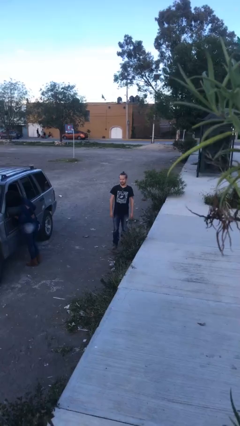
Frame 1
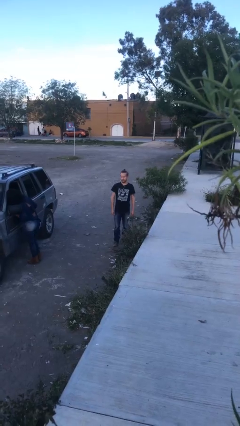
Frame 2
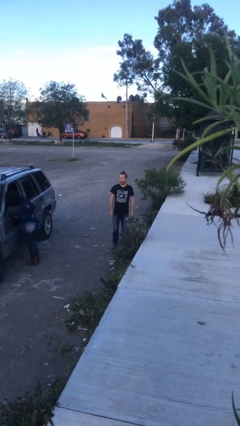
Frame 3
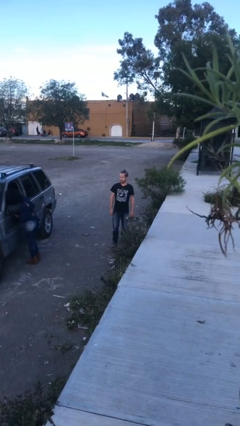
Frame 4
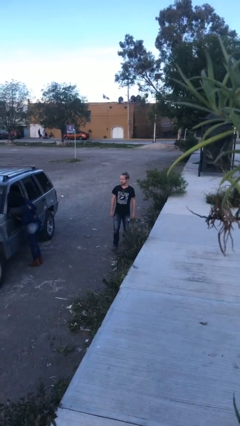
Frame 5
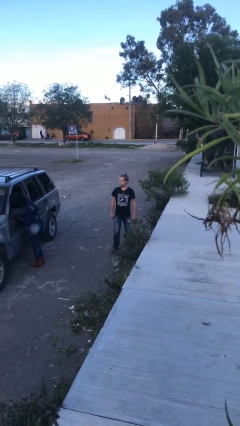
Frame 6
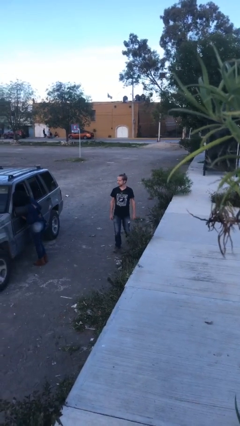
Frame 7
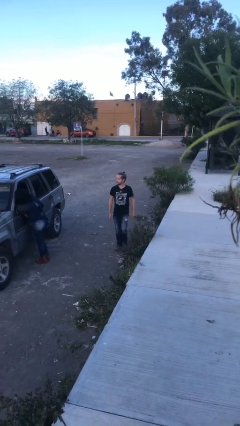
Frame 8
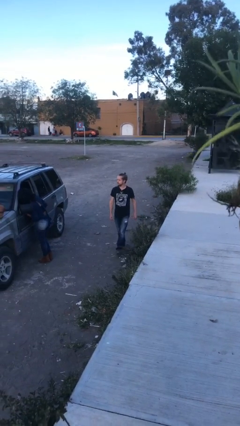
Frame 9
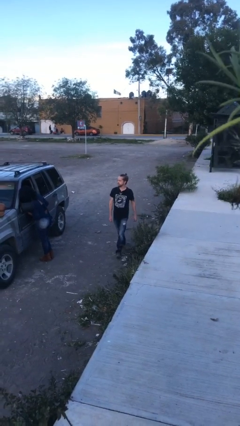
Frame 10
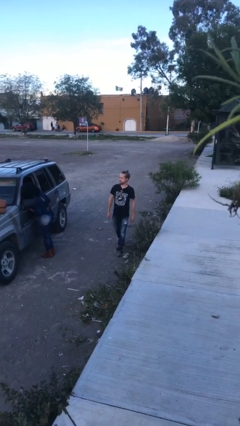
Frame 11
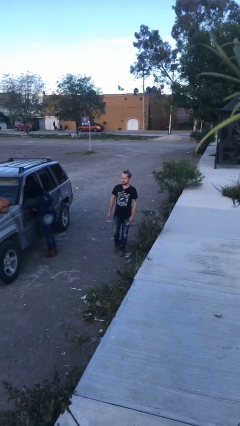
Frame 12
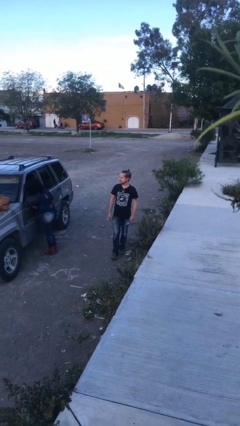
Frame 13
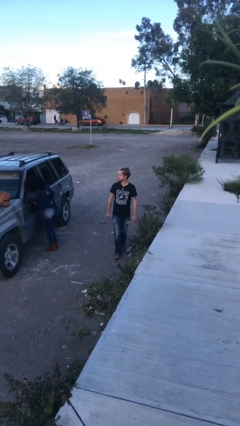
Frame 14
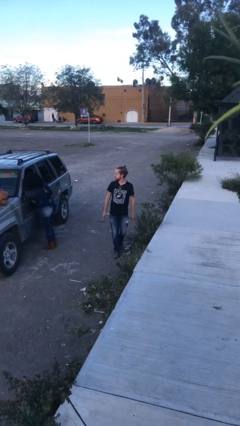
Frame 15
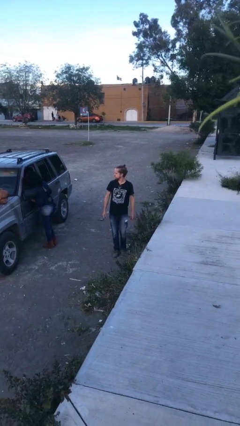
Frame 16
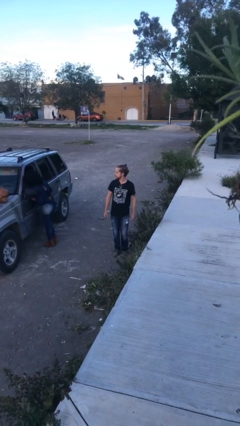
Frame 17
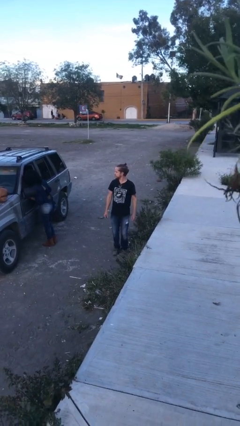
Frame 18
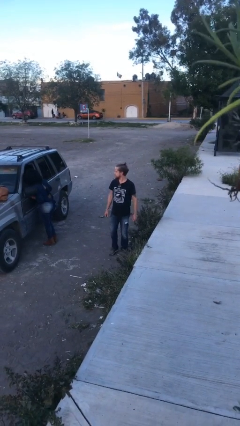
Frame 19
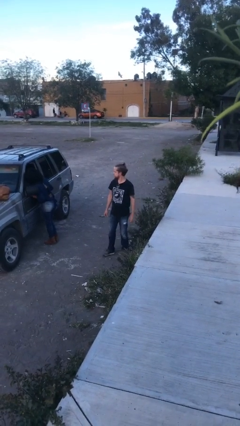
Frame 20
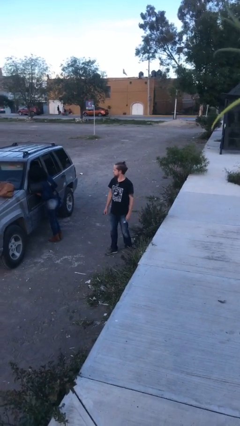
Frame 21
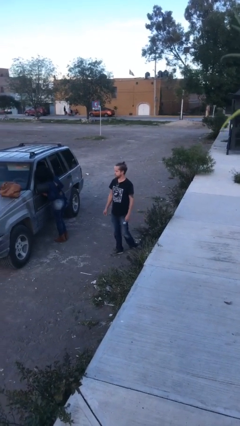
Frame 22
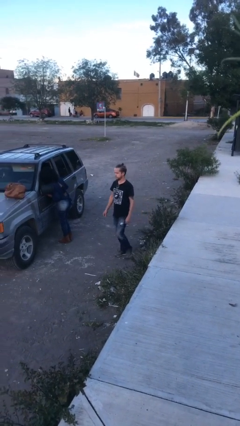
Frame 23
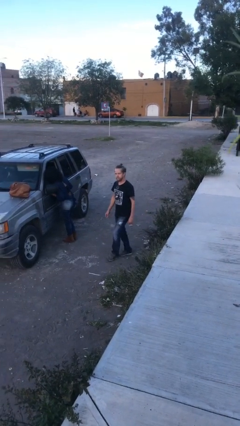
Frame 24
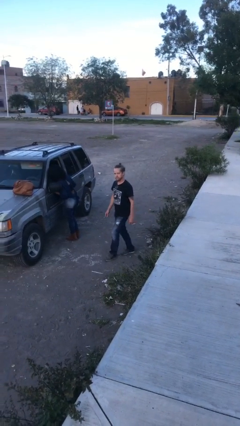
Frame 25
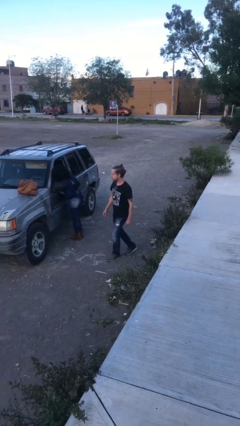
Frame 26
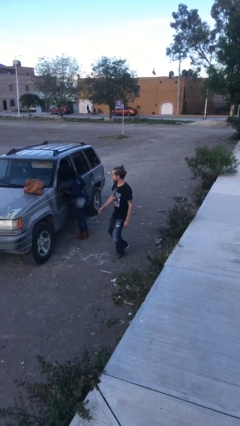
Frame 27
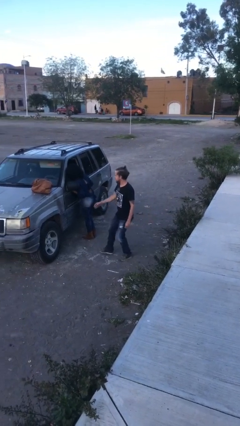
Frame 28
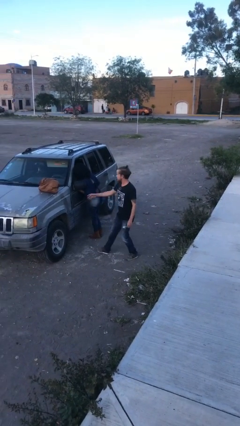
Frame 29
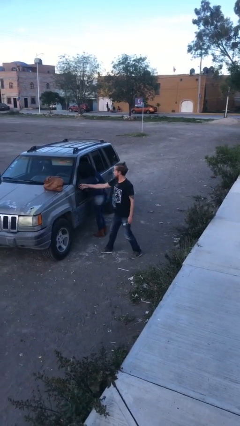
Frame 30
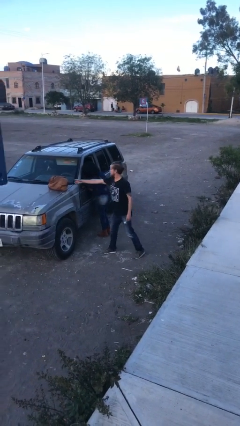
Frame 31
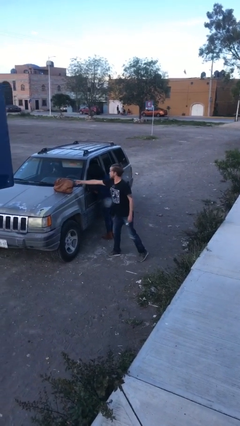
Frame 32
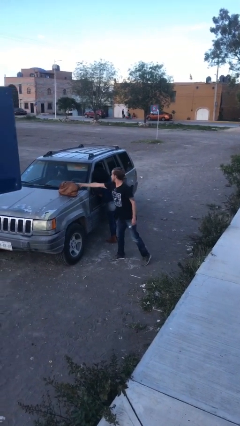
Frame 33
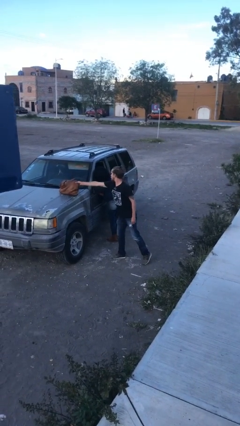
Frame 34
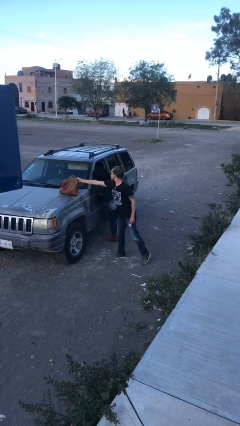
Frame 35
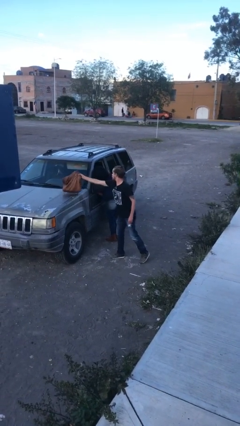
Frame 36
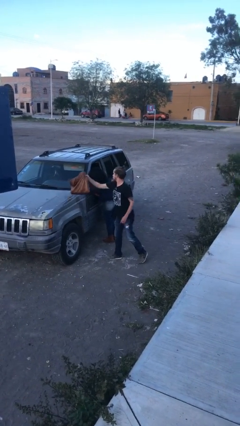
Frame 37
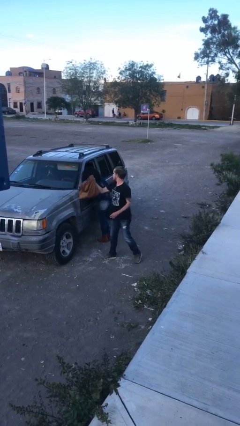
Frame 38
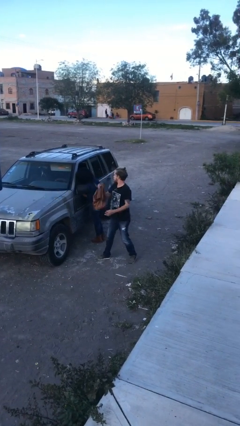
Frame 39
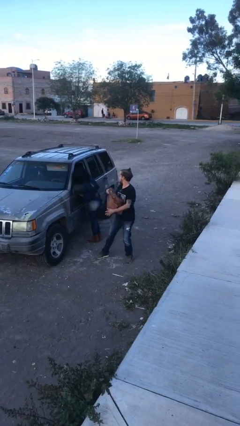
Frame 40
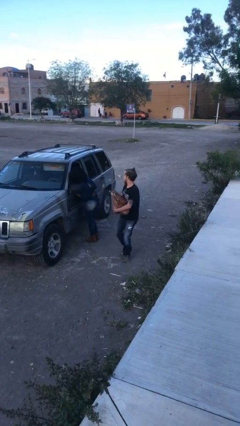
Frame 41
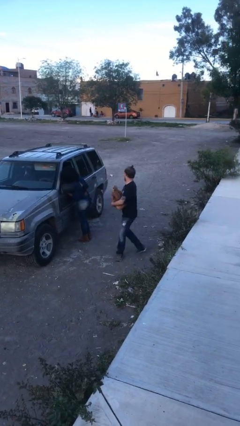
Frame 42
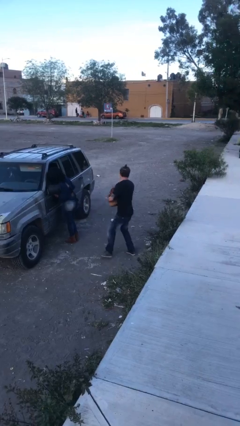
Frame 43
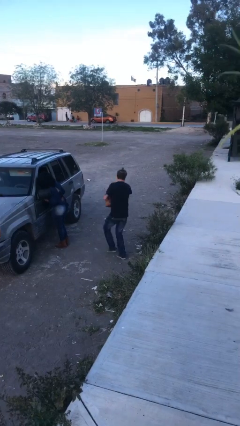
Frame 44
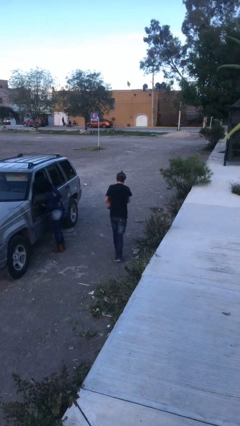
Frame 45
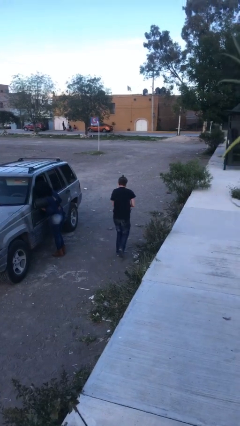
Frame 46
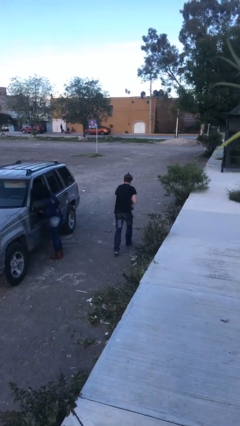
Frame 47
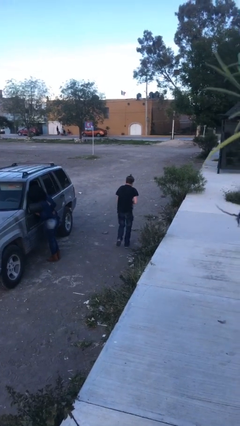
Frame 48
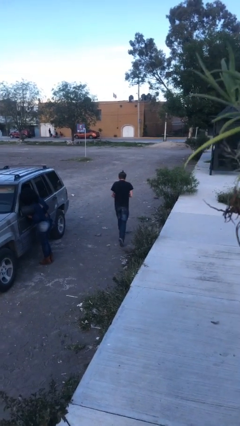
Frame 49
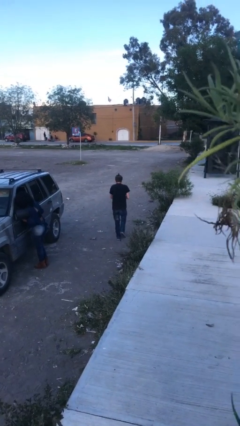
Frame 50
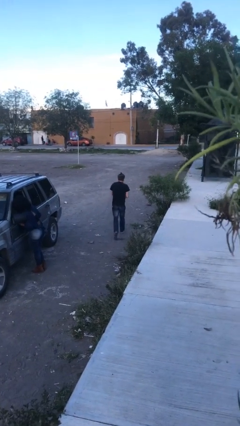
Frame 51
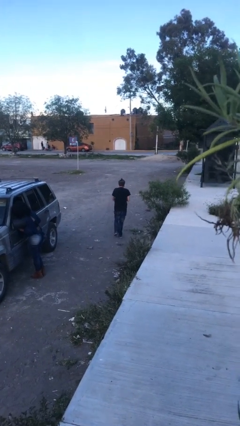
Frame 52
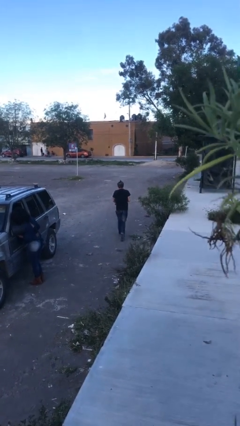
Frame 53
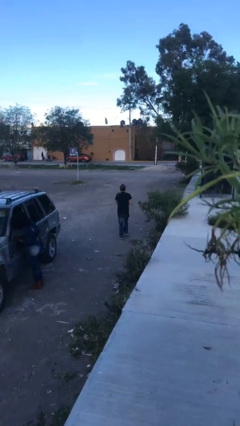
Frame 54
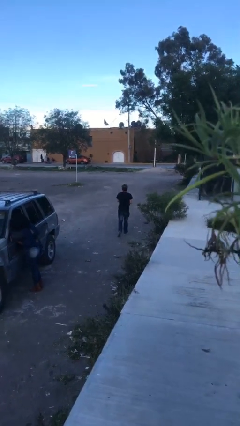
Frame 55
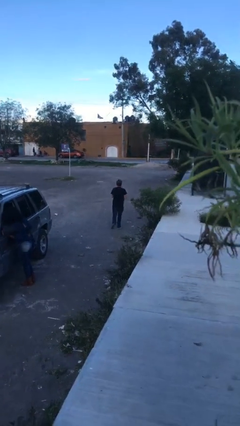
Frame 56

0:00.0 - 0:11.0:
person steals object from person

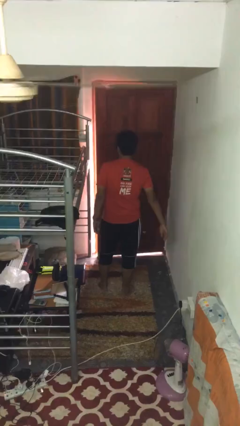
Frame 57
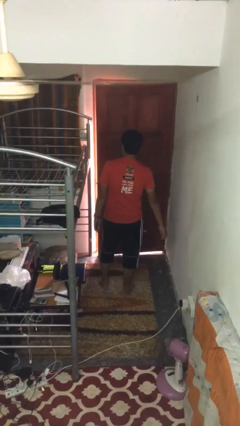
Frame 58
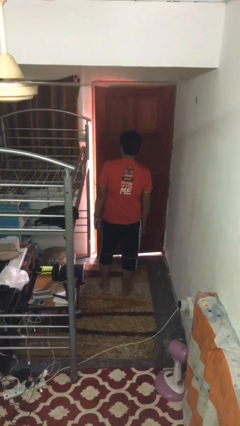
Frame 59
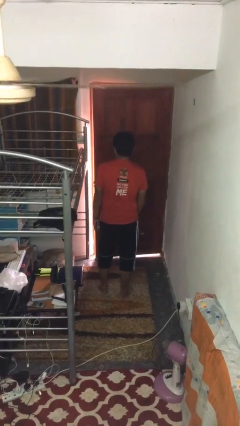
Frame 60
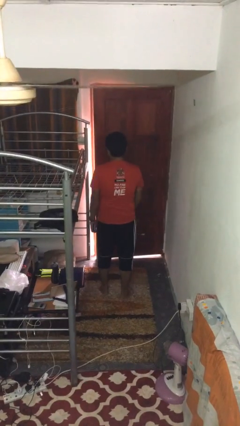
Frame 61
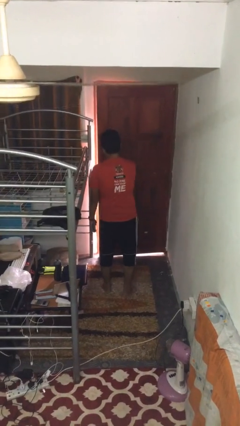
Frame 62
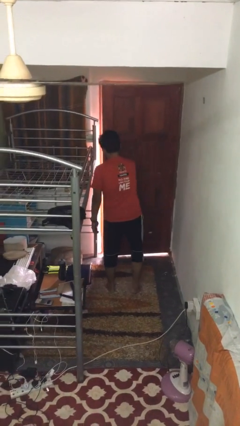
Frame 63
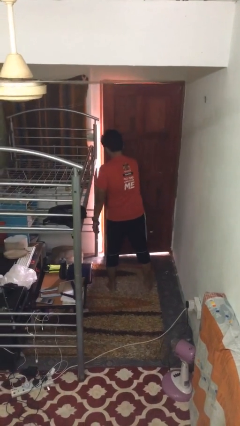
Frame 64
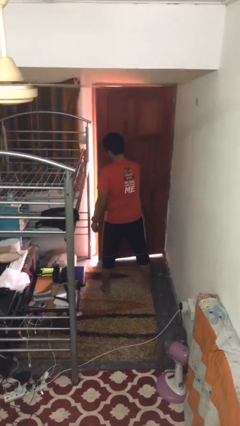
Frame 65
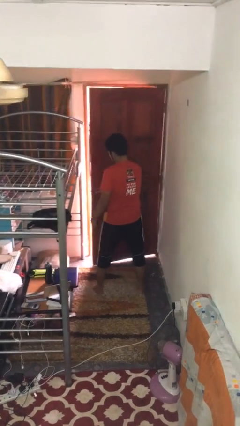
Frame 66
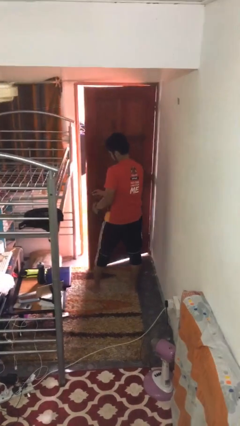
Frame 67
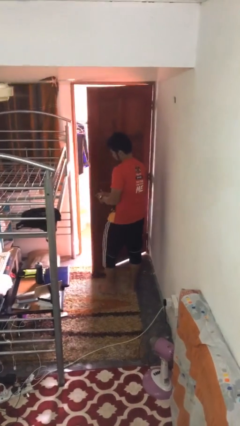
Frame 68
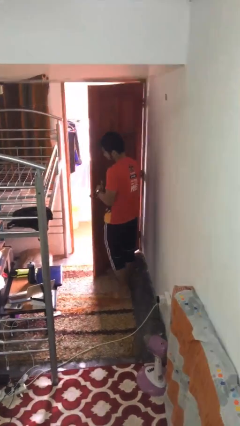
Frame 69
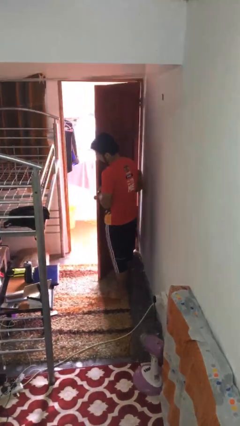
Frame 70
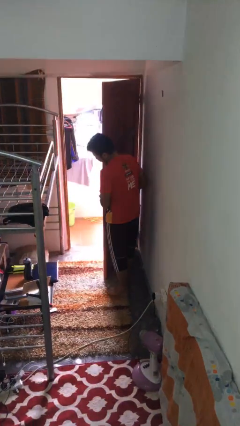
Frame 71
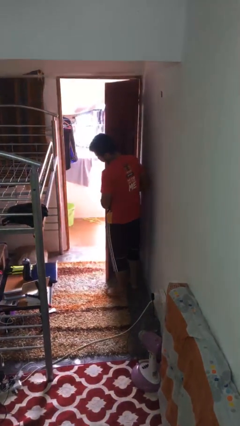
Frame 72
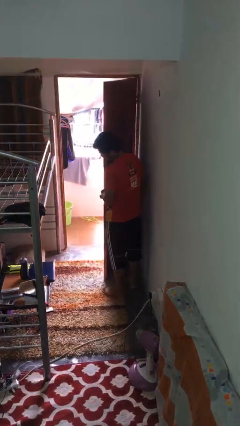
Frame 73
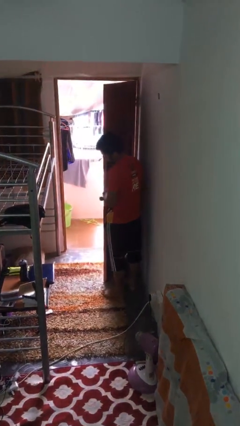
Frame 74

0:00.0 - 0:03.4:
person opens facility door

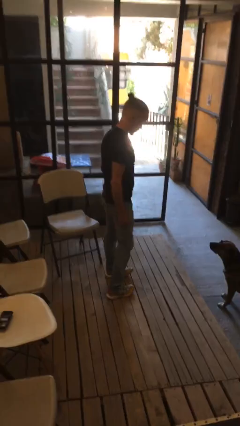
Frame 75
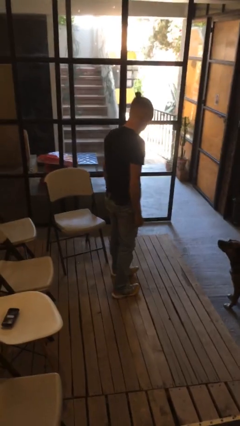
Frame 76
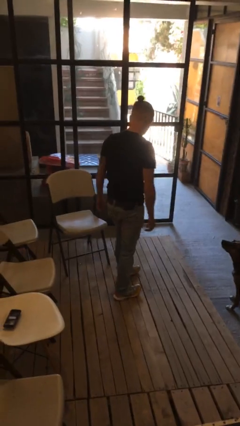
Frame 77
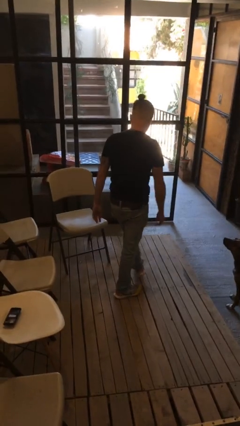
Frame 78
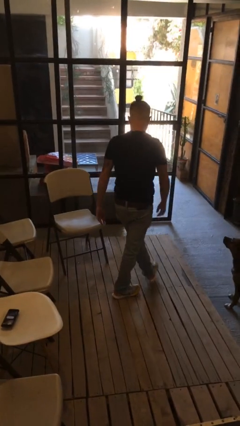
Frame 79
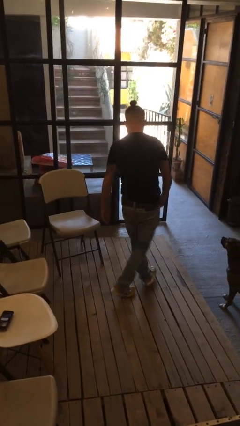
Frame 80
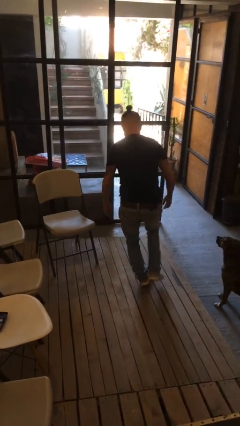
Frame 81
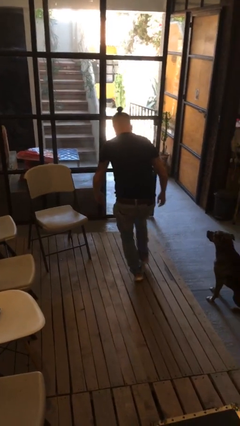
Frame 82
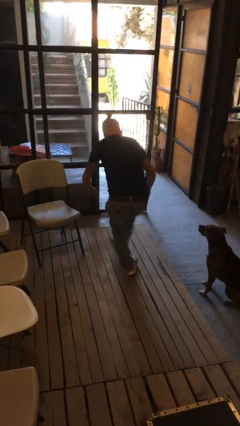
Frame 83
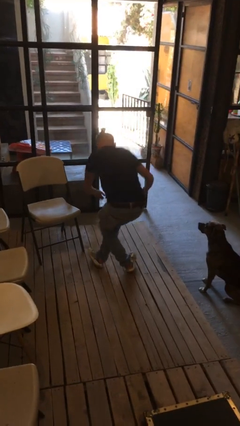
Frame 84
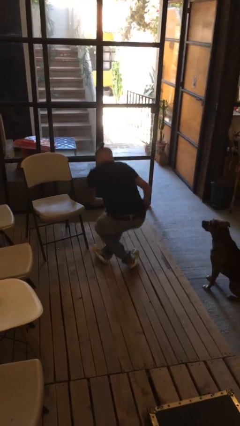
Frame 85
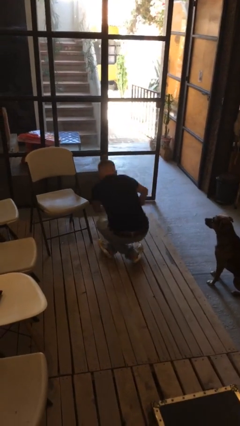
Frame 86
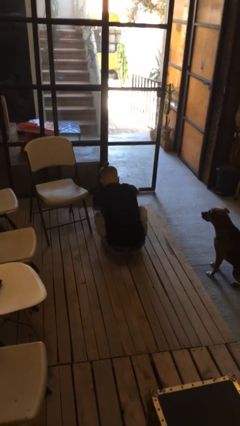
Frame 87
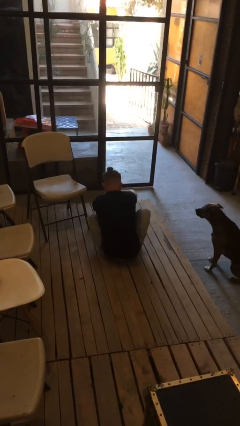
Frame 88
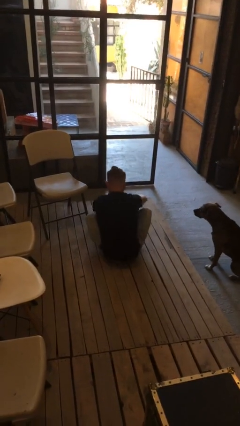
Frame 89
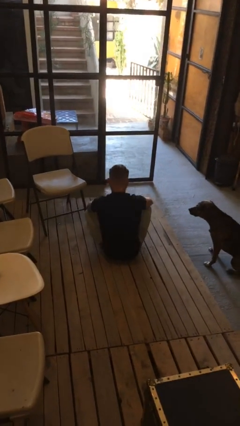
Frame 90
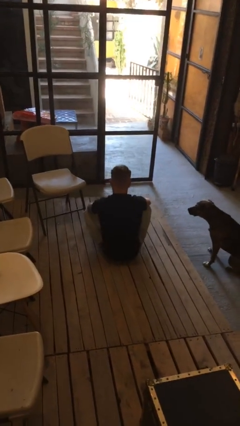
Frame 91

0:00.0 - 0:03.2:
person sits crisscross

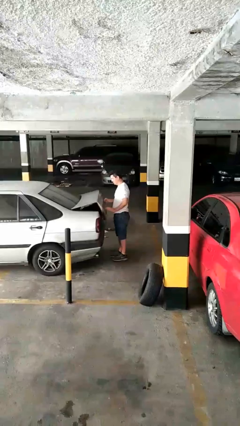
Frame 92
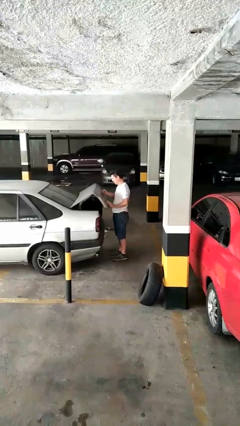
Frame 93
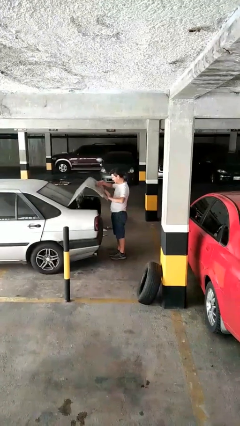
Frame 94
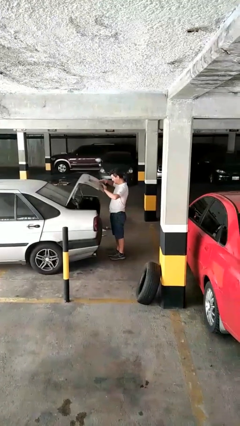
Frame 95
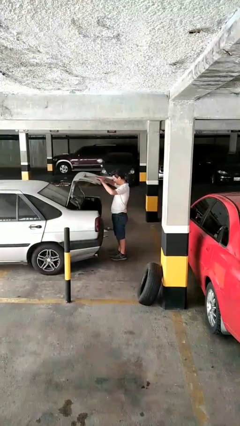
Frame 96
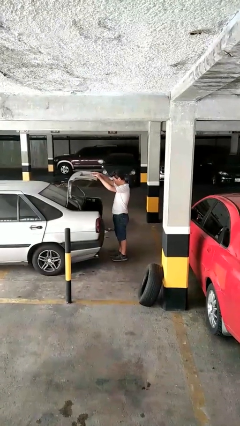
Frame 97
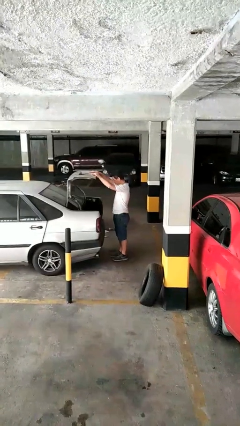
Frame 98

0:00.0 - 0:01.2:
person opens car trunk
